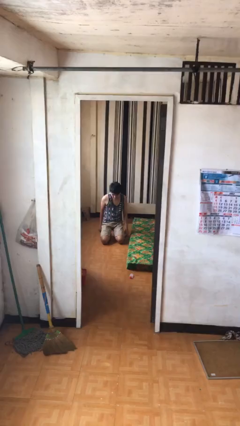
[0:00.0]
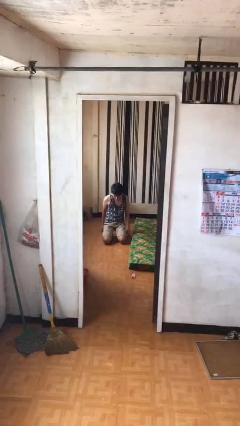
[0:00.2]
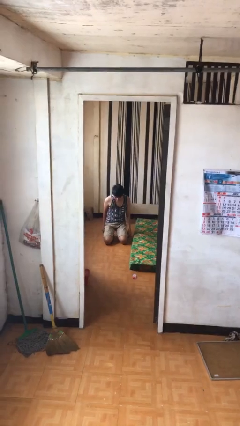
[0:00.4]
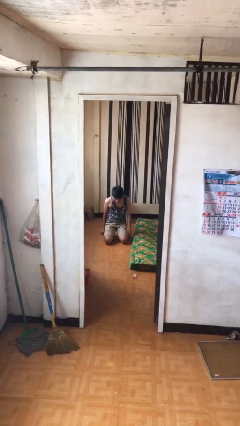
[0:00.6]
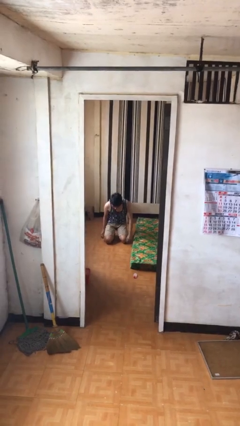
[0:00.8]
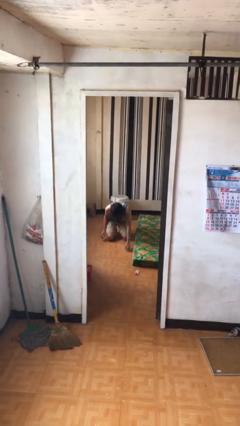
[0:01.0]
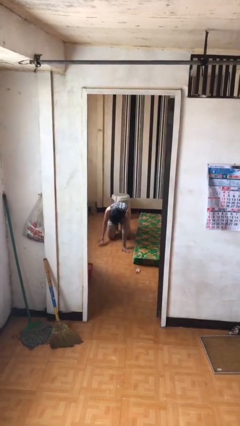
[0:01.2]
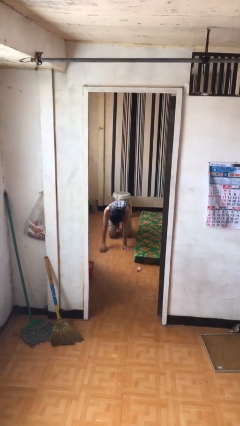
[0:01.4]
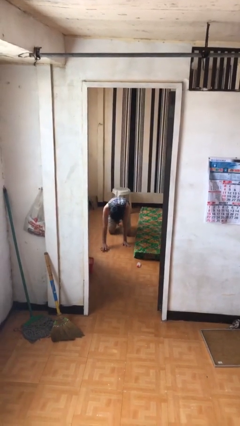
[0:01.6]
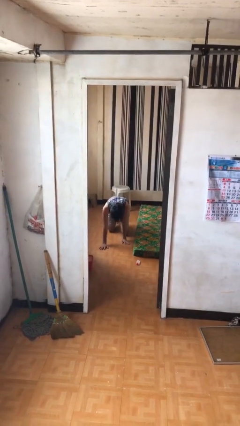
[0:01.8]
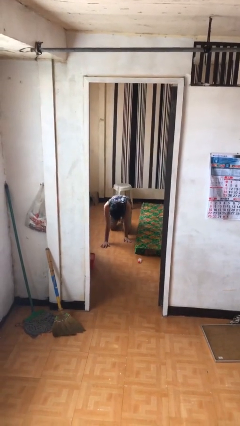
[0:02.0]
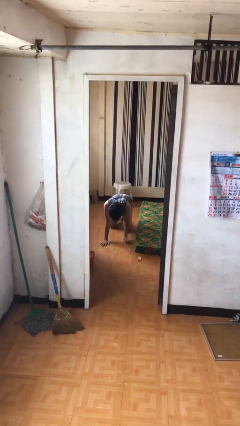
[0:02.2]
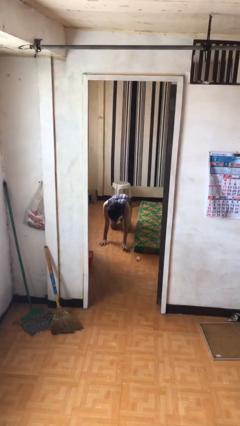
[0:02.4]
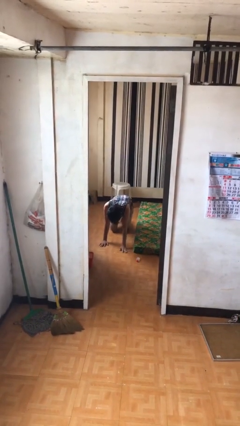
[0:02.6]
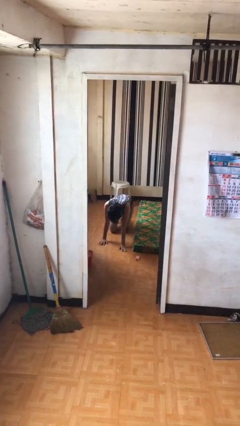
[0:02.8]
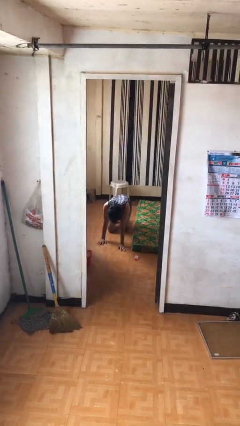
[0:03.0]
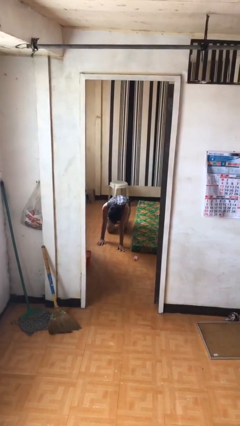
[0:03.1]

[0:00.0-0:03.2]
person crawls

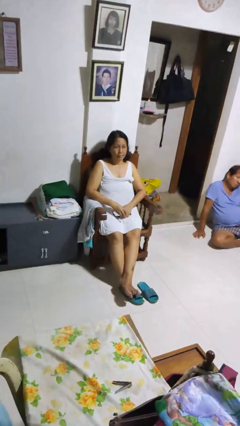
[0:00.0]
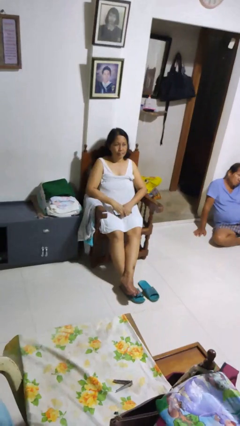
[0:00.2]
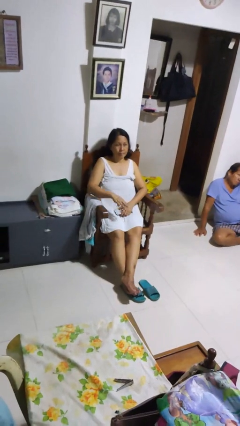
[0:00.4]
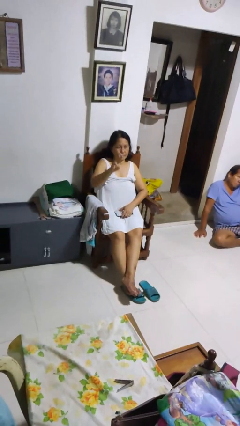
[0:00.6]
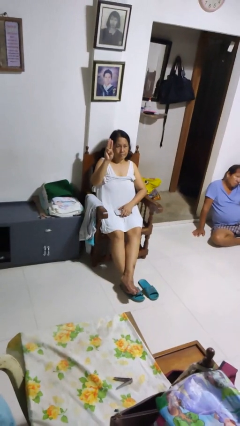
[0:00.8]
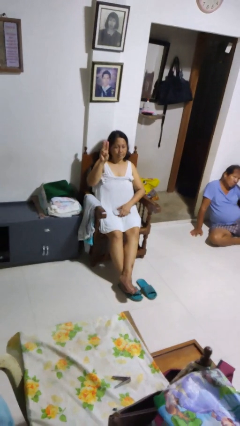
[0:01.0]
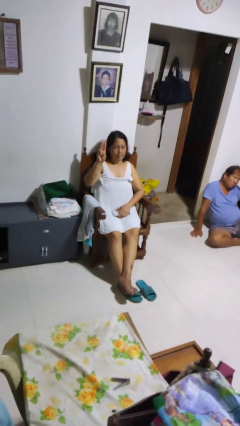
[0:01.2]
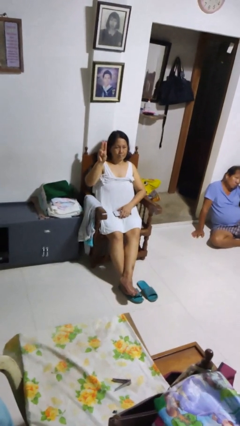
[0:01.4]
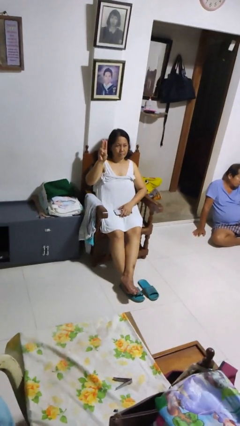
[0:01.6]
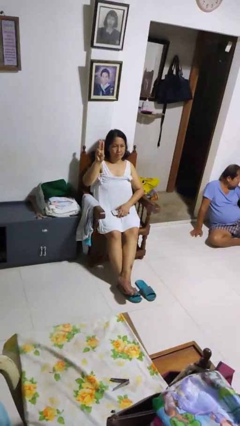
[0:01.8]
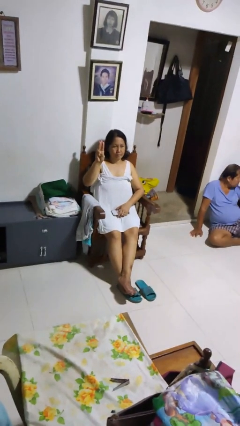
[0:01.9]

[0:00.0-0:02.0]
person gestures number three

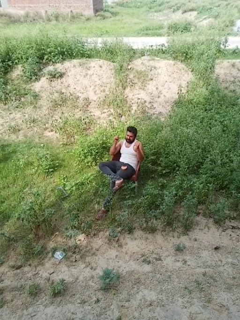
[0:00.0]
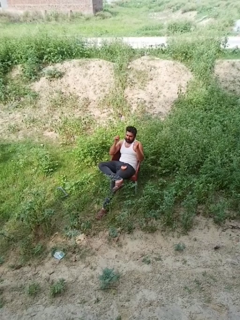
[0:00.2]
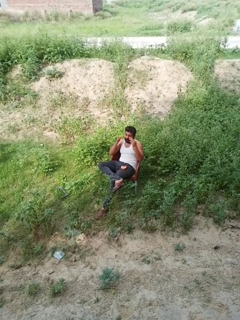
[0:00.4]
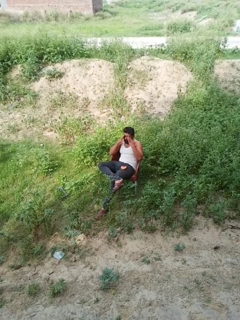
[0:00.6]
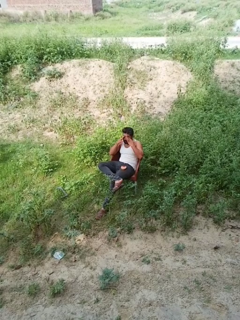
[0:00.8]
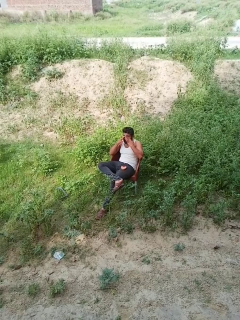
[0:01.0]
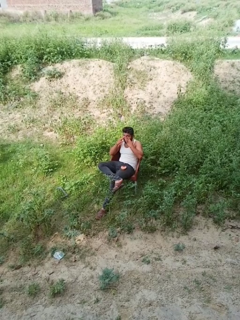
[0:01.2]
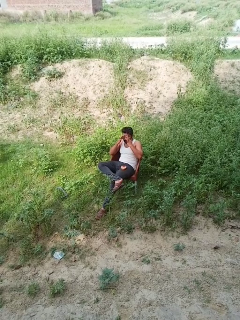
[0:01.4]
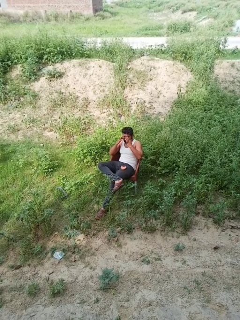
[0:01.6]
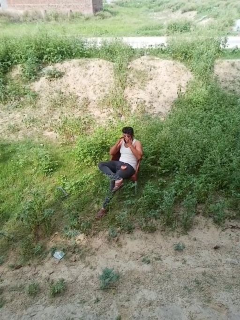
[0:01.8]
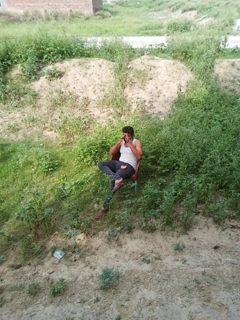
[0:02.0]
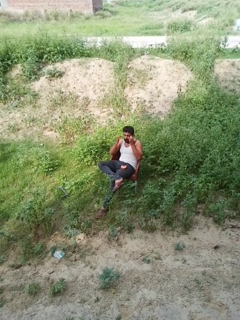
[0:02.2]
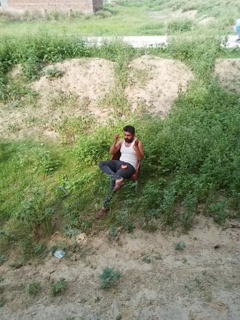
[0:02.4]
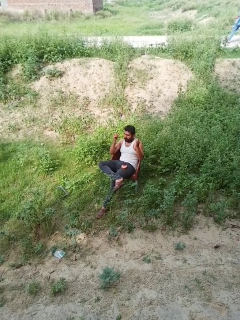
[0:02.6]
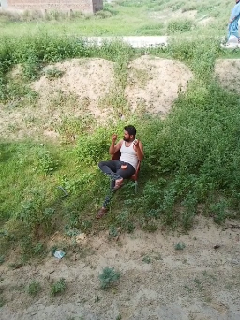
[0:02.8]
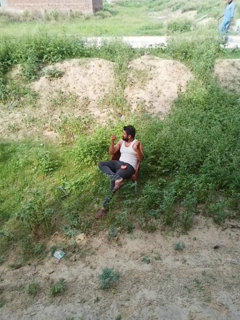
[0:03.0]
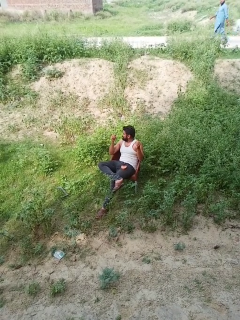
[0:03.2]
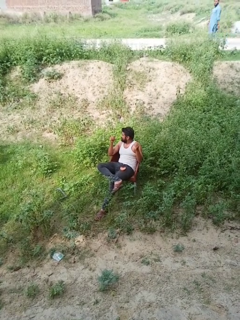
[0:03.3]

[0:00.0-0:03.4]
person rubs eyes

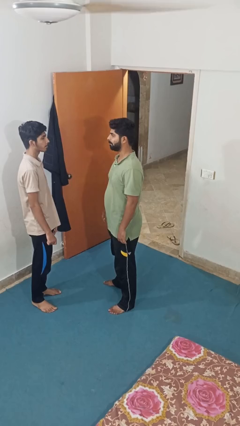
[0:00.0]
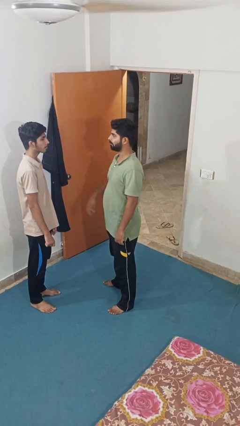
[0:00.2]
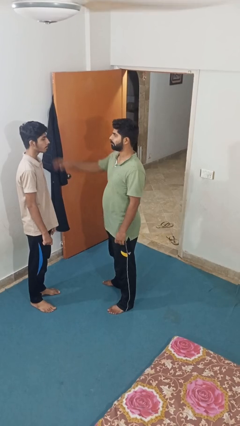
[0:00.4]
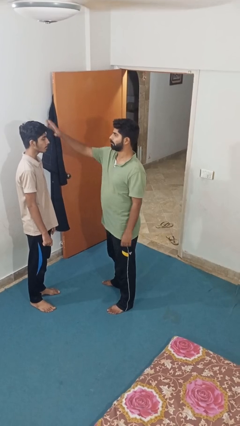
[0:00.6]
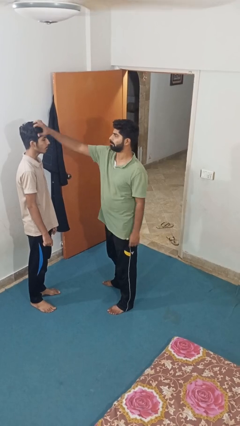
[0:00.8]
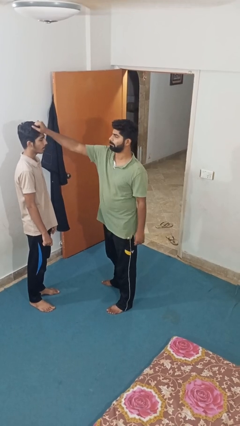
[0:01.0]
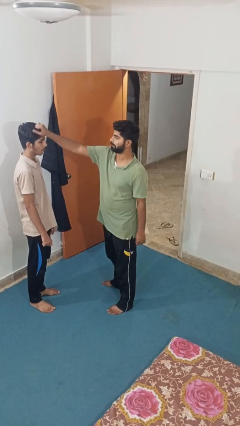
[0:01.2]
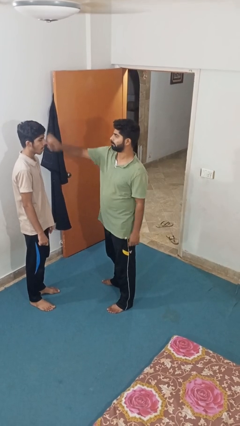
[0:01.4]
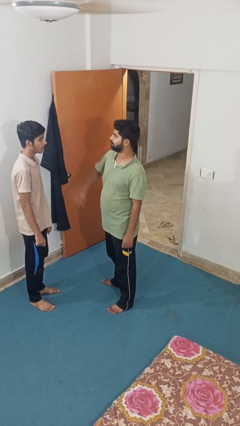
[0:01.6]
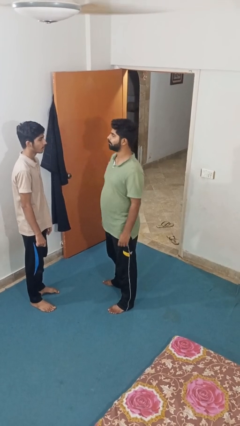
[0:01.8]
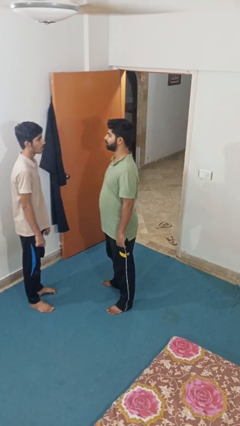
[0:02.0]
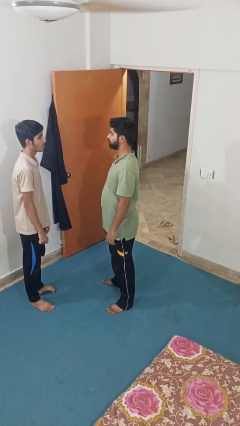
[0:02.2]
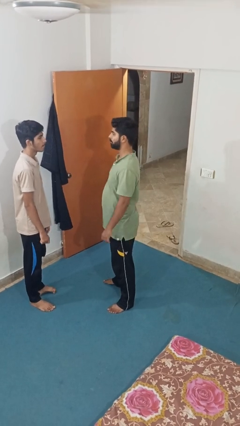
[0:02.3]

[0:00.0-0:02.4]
person grabs person by hair

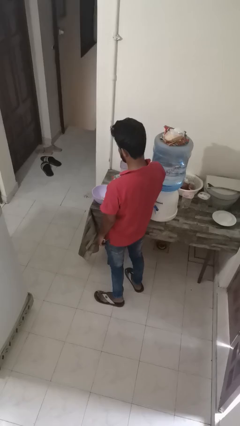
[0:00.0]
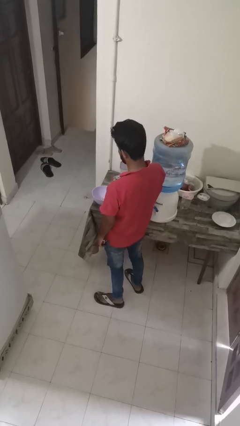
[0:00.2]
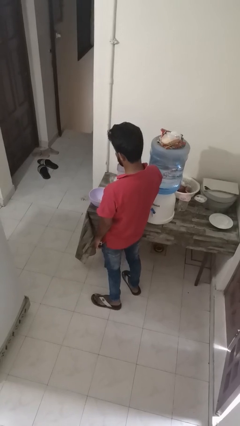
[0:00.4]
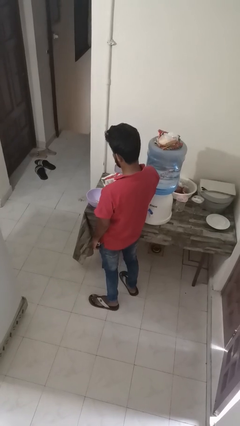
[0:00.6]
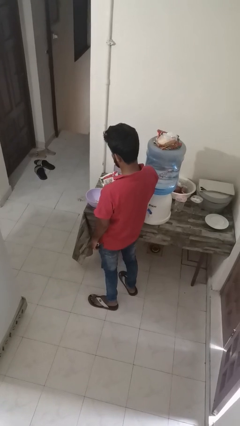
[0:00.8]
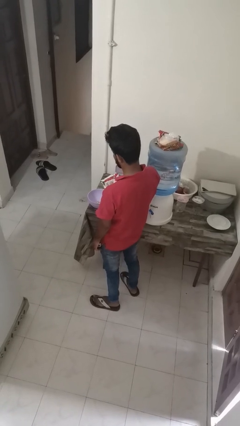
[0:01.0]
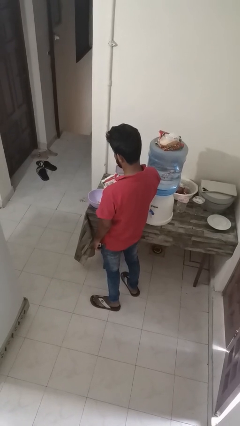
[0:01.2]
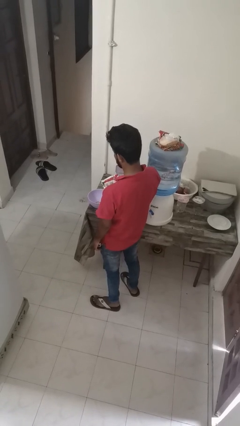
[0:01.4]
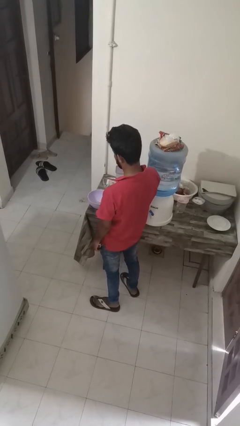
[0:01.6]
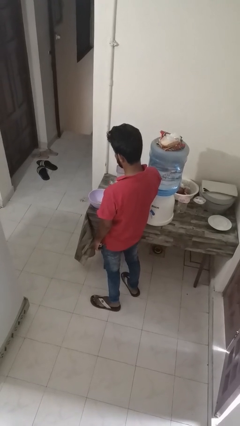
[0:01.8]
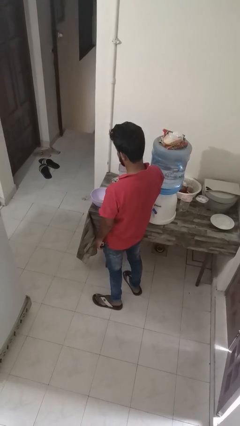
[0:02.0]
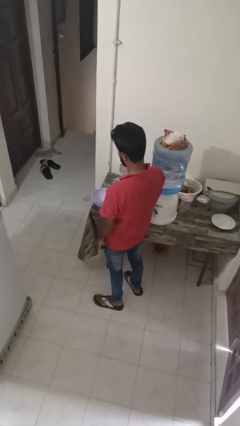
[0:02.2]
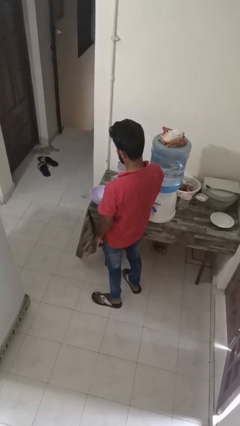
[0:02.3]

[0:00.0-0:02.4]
person pours into bowl

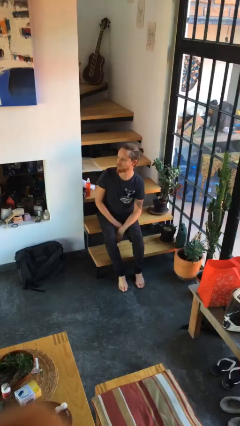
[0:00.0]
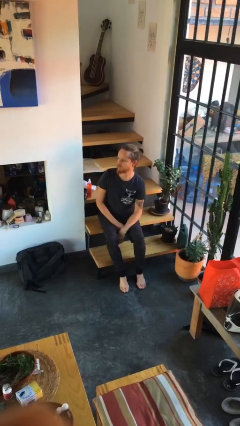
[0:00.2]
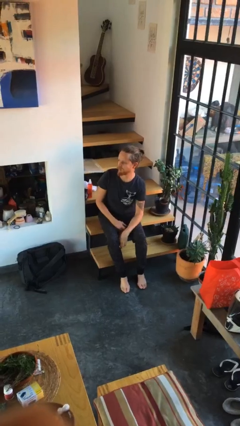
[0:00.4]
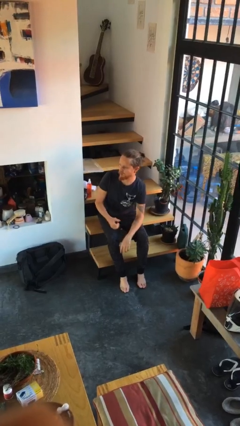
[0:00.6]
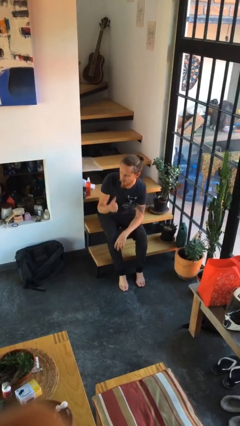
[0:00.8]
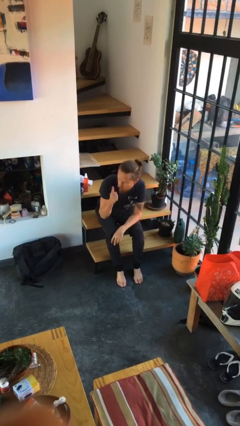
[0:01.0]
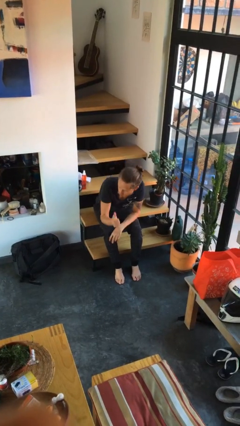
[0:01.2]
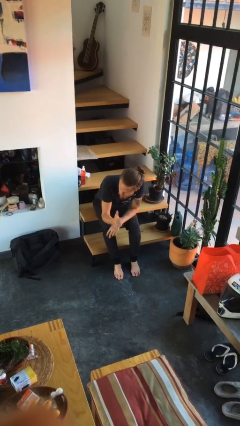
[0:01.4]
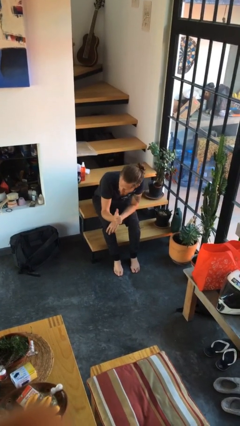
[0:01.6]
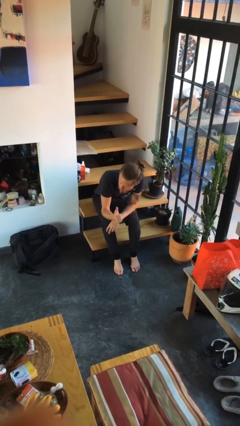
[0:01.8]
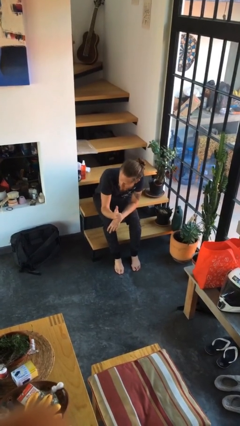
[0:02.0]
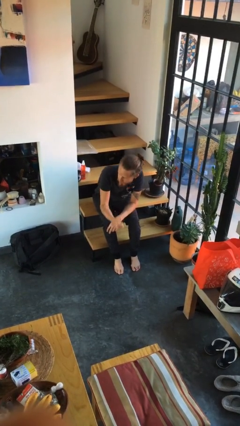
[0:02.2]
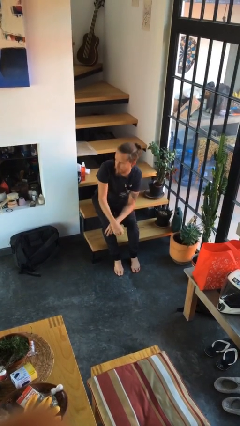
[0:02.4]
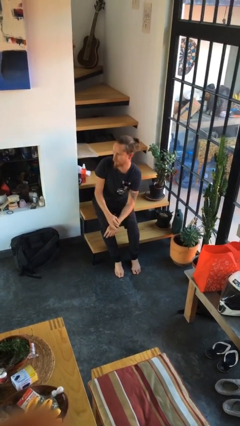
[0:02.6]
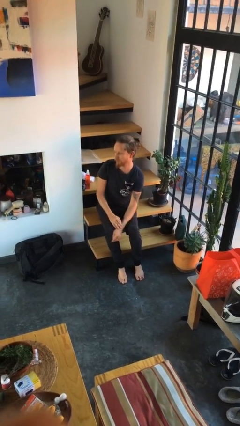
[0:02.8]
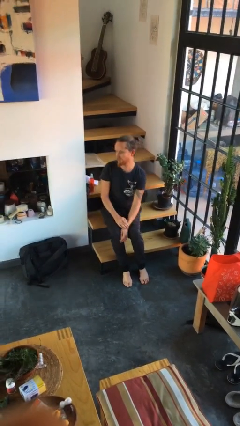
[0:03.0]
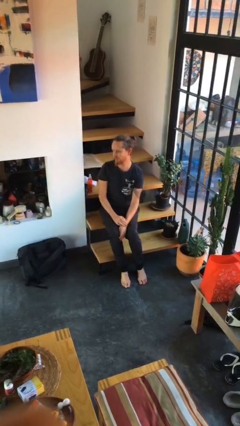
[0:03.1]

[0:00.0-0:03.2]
person gestures thumbs up

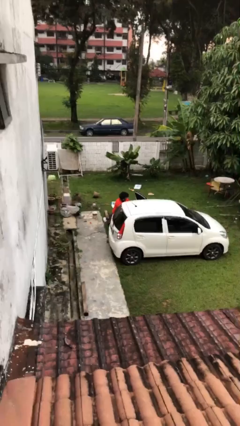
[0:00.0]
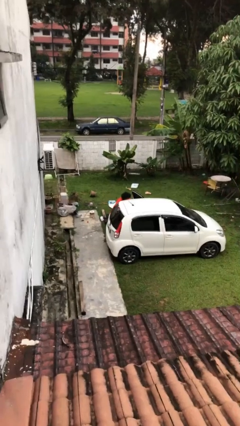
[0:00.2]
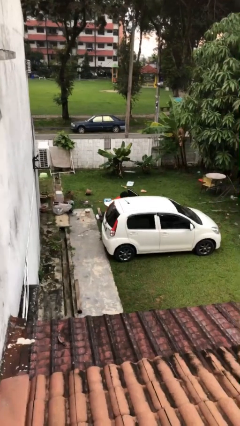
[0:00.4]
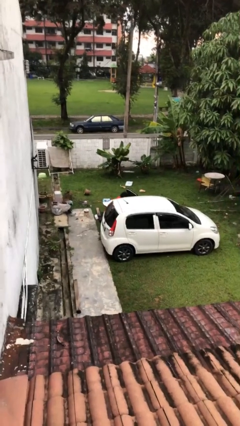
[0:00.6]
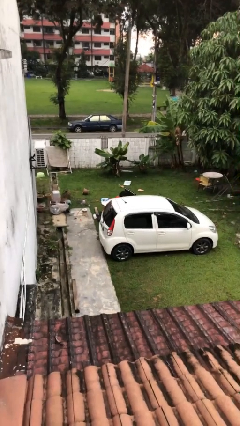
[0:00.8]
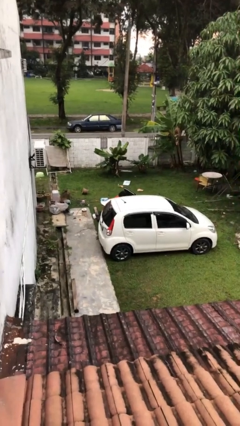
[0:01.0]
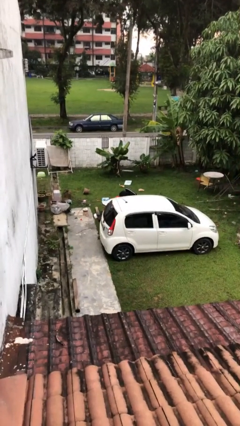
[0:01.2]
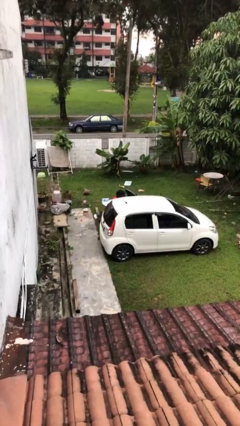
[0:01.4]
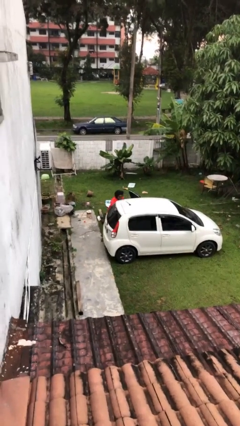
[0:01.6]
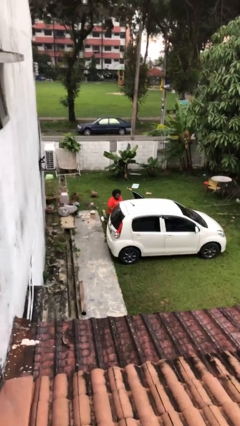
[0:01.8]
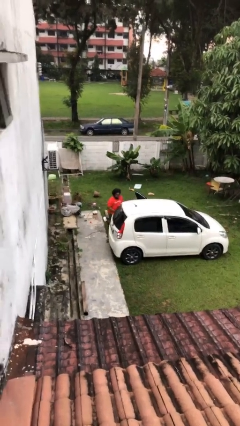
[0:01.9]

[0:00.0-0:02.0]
person loads car
